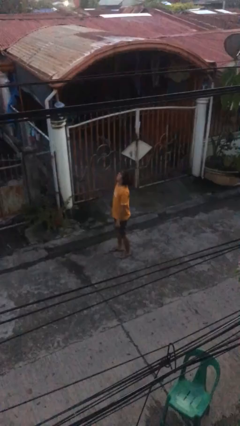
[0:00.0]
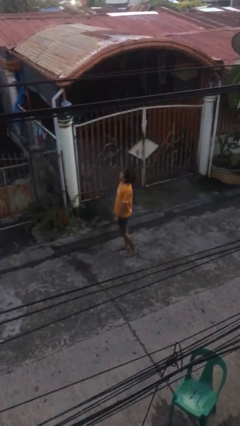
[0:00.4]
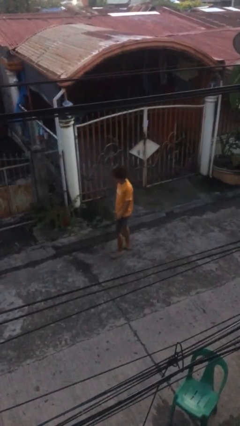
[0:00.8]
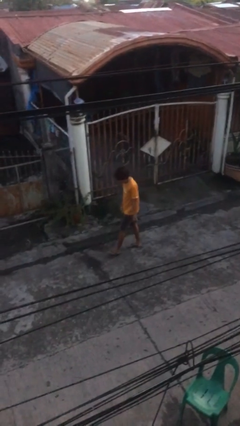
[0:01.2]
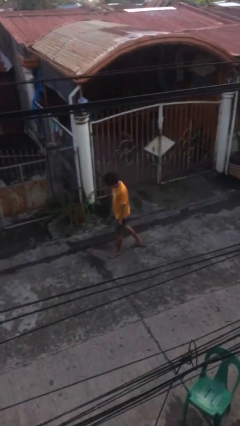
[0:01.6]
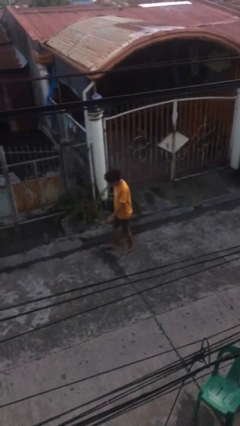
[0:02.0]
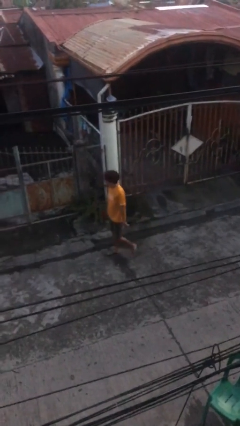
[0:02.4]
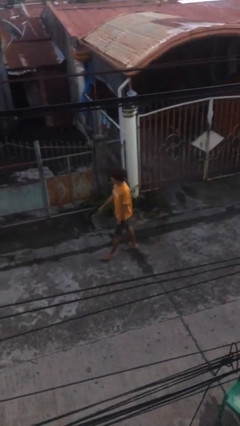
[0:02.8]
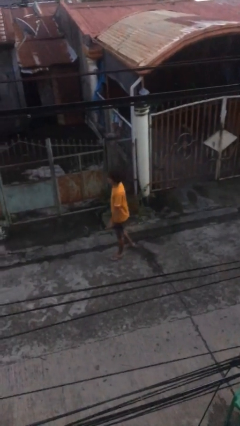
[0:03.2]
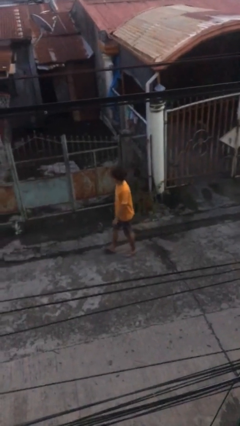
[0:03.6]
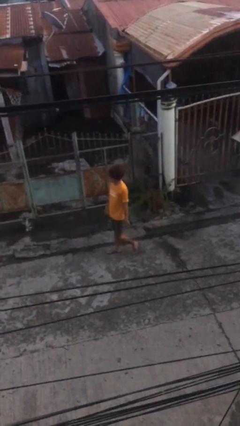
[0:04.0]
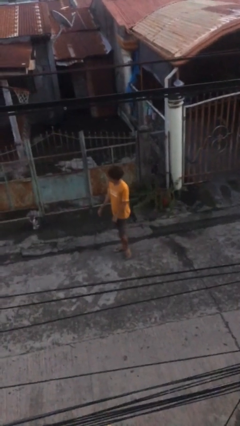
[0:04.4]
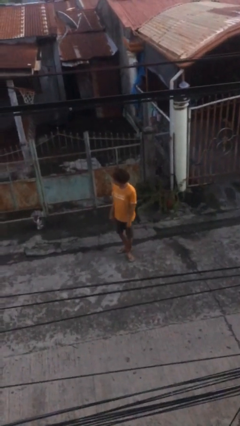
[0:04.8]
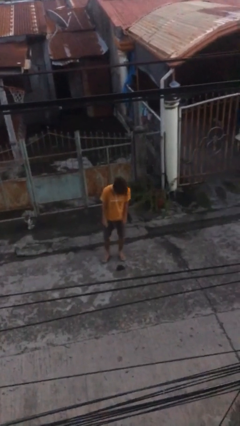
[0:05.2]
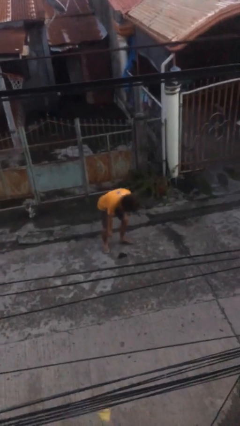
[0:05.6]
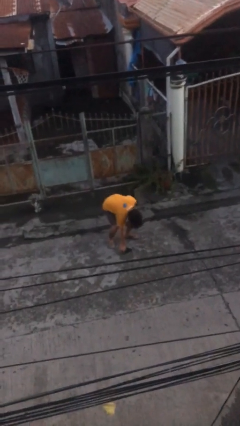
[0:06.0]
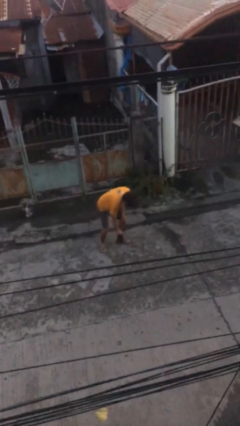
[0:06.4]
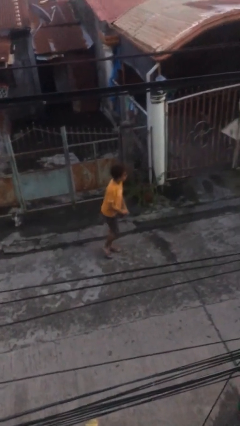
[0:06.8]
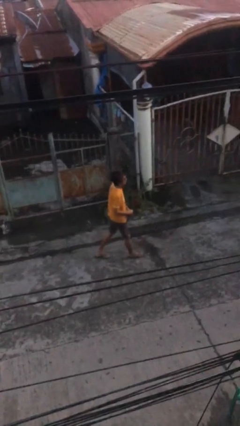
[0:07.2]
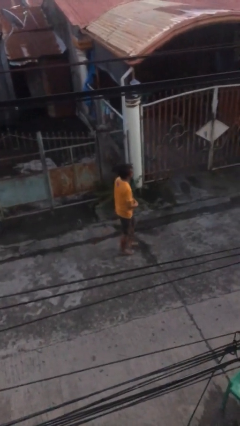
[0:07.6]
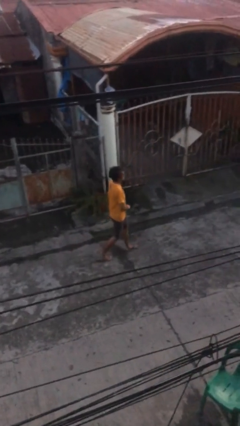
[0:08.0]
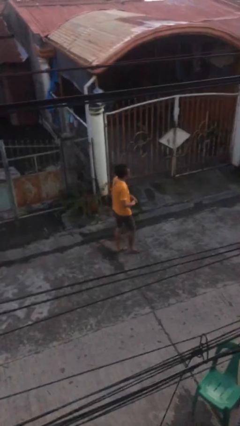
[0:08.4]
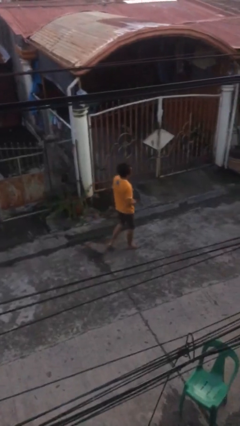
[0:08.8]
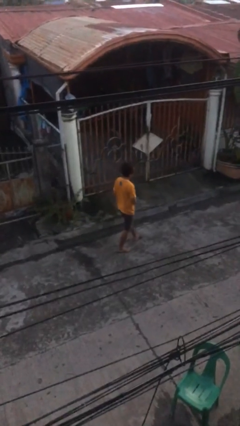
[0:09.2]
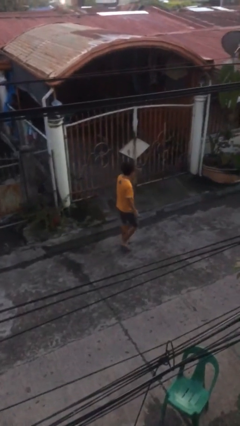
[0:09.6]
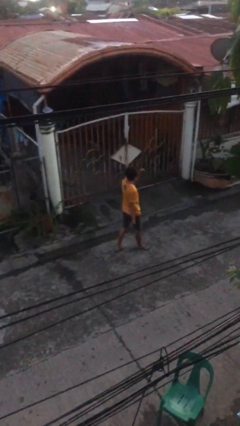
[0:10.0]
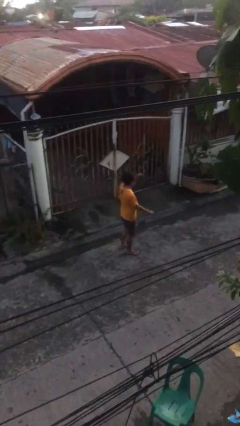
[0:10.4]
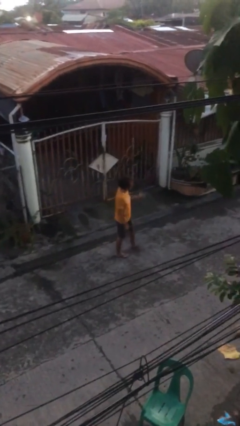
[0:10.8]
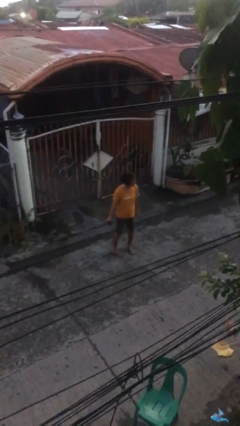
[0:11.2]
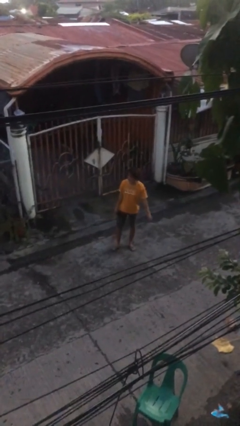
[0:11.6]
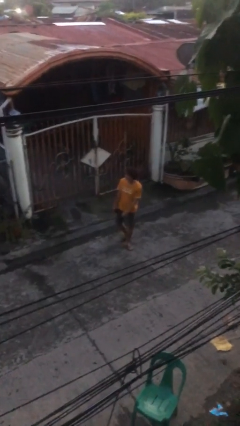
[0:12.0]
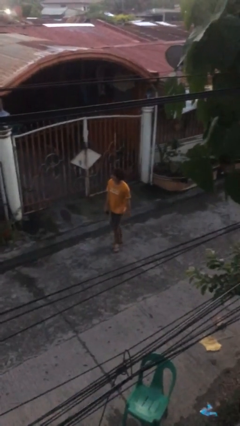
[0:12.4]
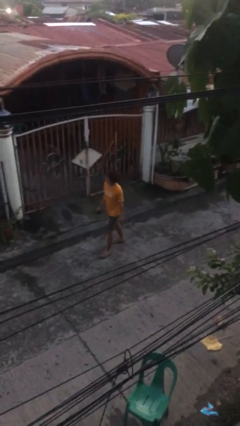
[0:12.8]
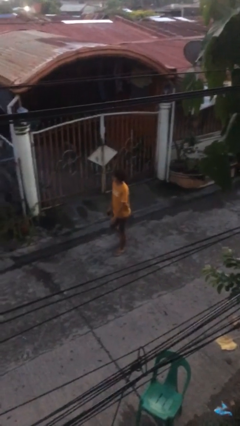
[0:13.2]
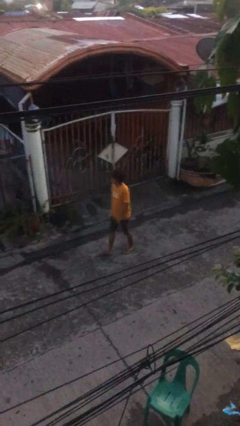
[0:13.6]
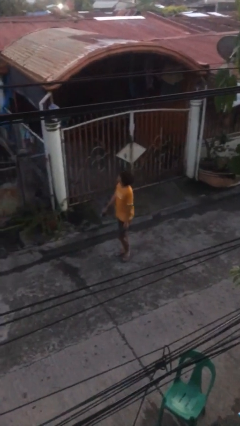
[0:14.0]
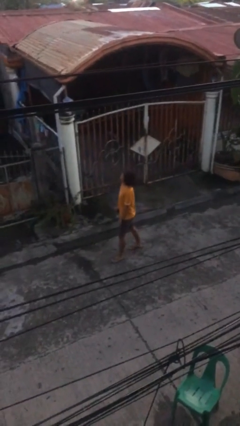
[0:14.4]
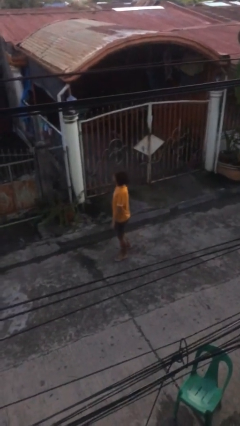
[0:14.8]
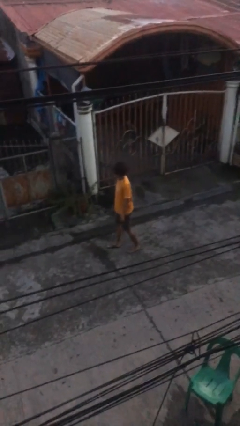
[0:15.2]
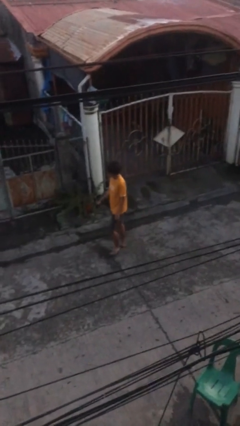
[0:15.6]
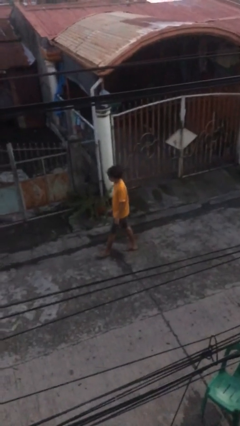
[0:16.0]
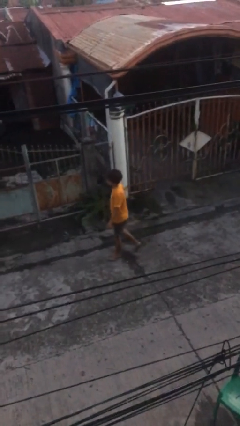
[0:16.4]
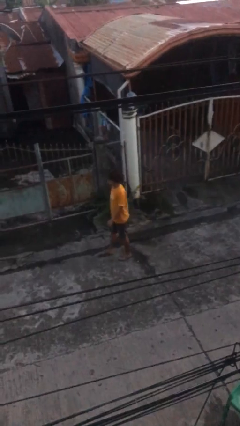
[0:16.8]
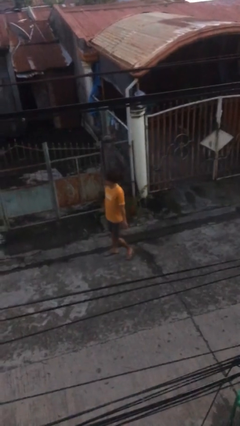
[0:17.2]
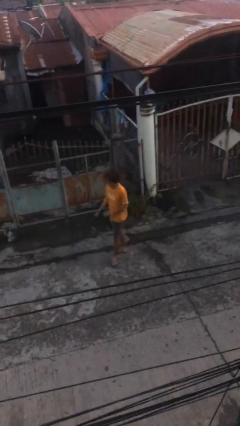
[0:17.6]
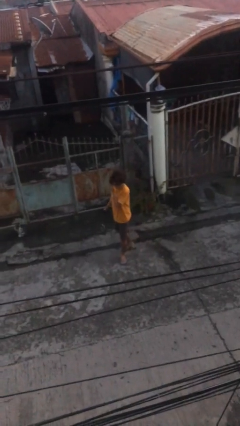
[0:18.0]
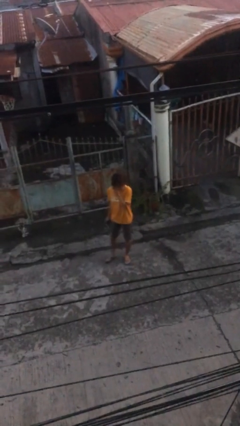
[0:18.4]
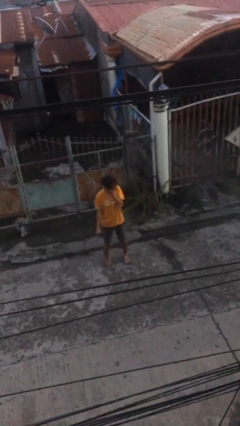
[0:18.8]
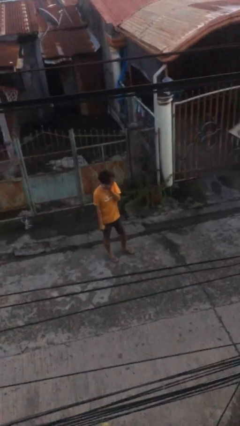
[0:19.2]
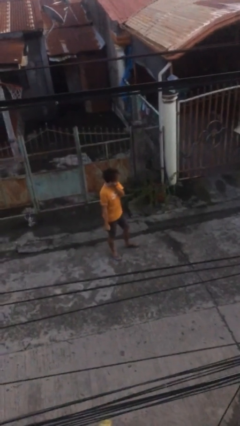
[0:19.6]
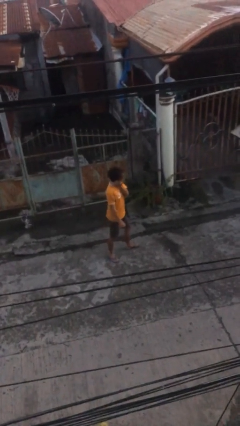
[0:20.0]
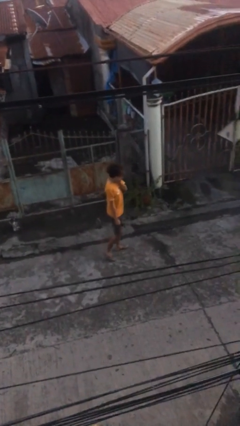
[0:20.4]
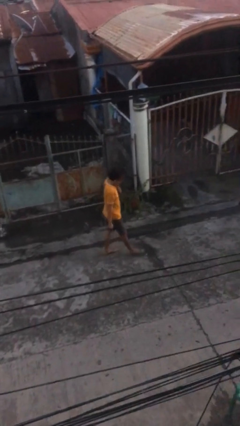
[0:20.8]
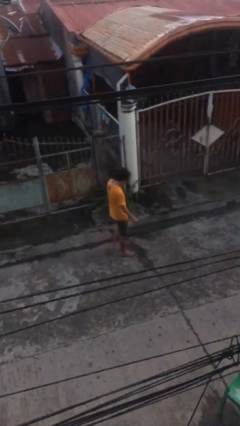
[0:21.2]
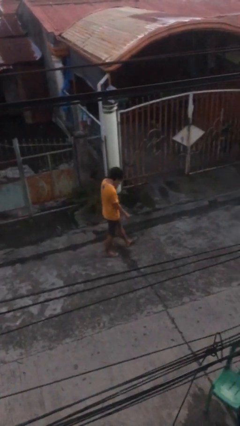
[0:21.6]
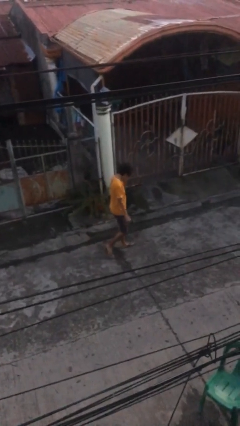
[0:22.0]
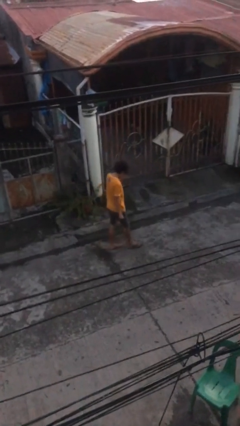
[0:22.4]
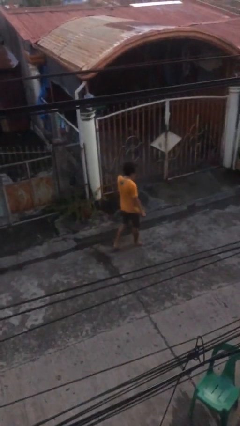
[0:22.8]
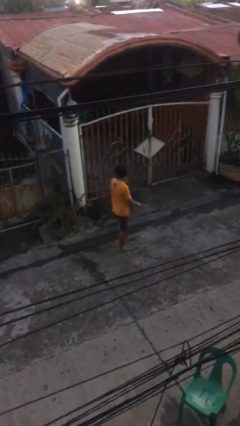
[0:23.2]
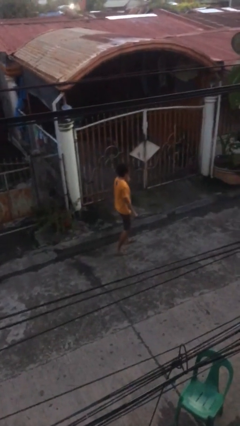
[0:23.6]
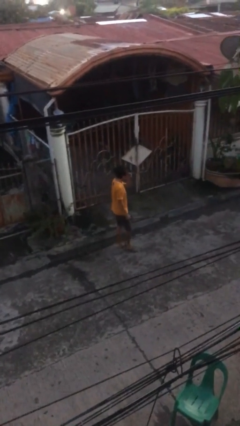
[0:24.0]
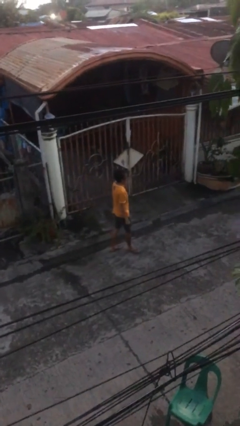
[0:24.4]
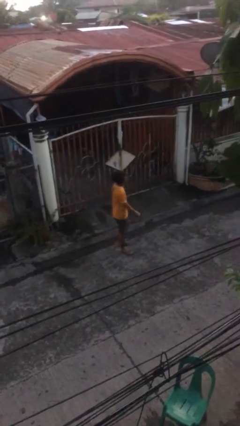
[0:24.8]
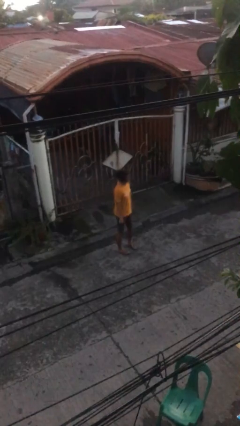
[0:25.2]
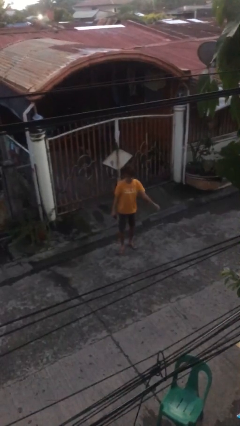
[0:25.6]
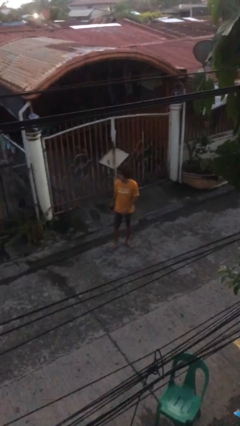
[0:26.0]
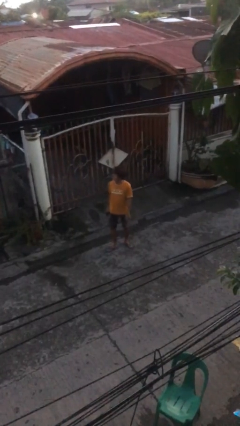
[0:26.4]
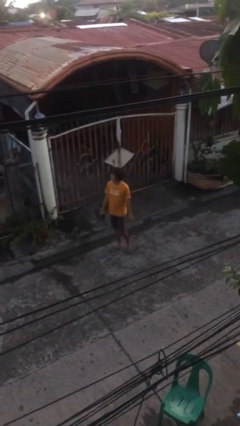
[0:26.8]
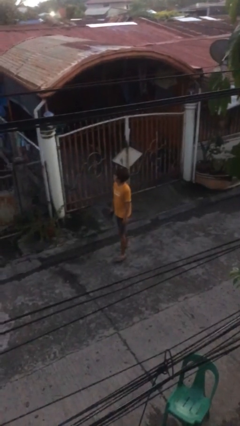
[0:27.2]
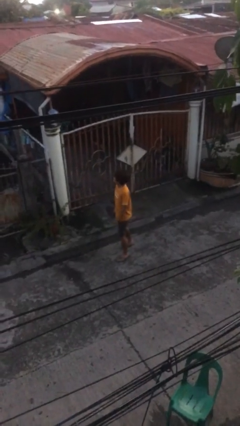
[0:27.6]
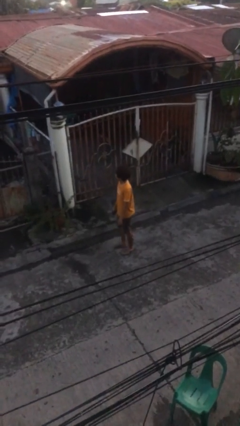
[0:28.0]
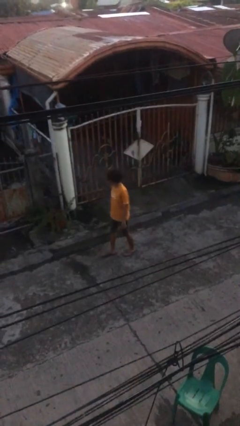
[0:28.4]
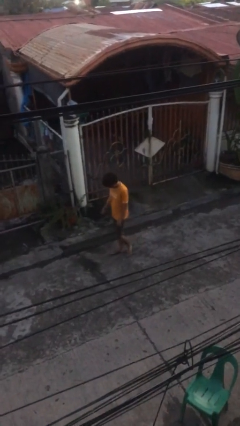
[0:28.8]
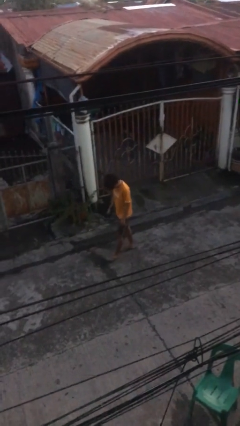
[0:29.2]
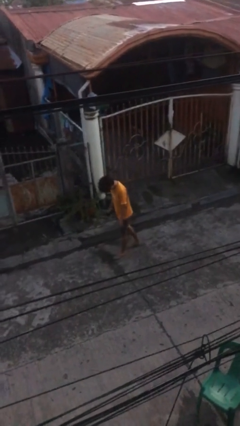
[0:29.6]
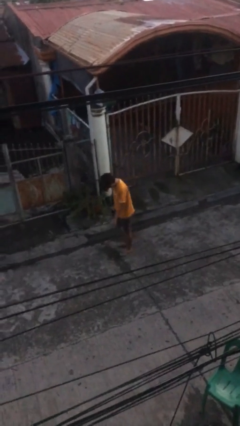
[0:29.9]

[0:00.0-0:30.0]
person walks

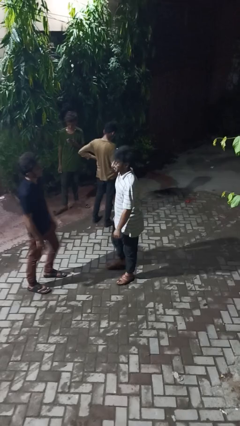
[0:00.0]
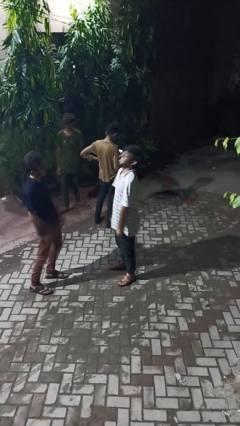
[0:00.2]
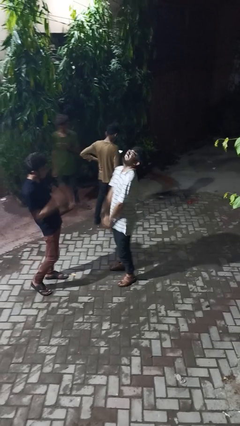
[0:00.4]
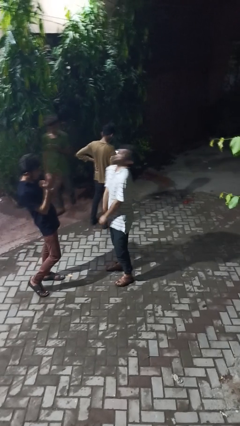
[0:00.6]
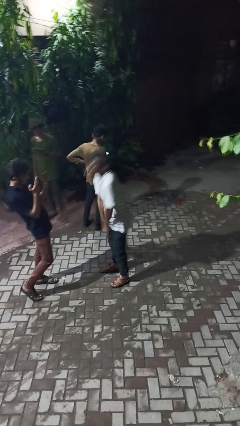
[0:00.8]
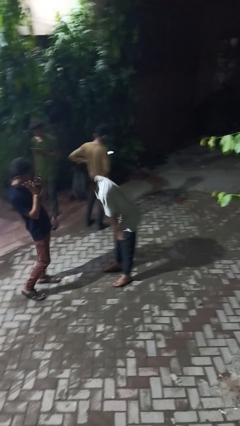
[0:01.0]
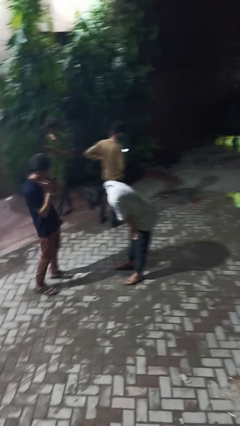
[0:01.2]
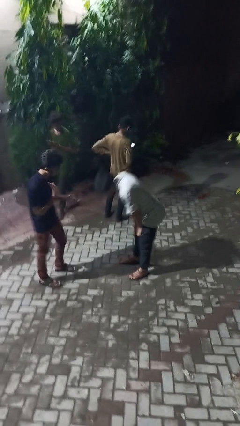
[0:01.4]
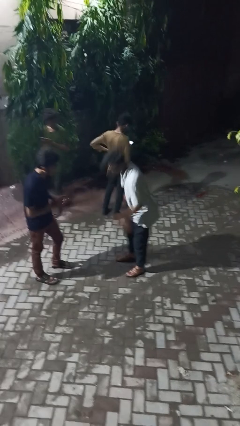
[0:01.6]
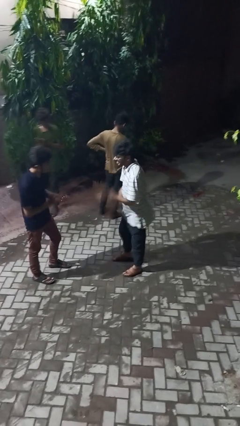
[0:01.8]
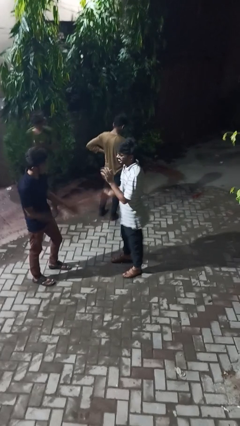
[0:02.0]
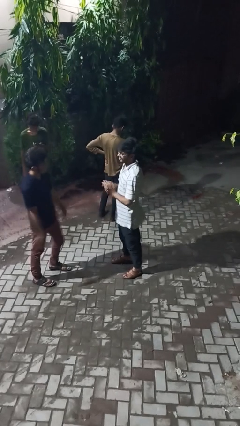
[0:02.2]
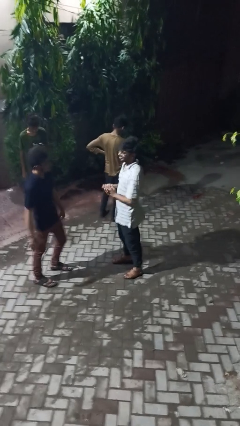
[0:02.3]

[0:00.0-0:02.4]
person laughs with person

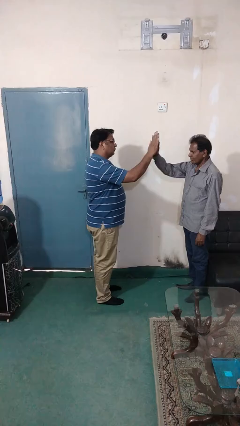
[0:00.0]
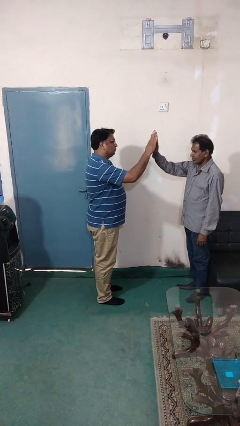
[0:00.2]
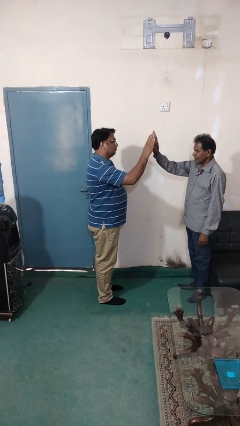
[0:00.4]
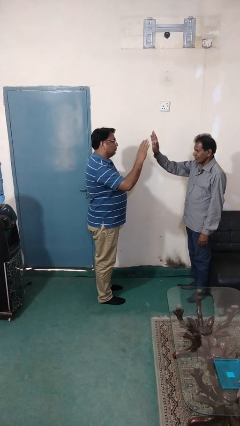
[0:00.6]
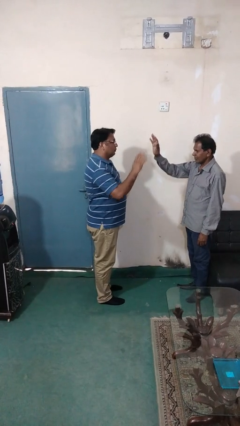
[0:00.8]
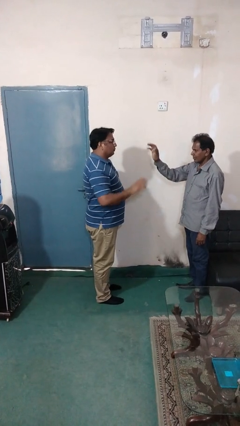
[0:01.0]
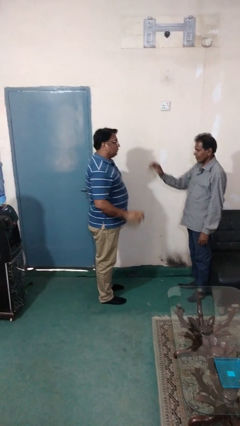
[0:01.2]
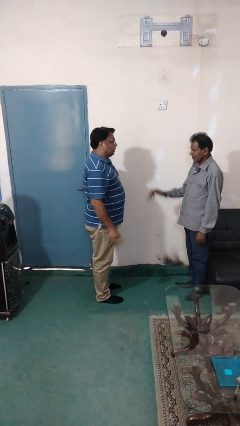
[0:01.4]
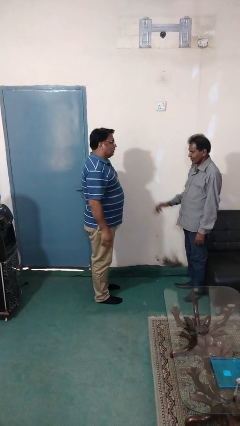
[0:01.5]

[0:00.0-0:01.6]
person highfives hand
